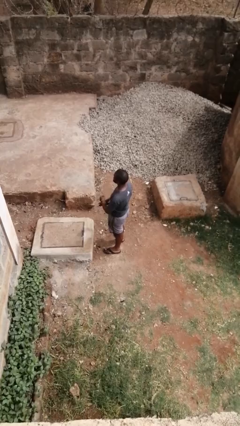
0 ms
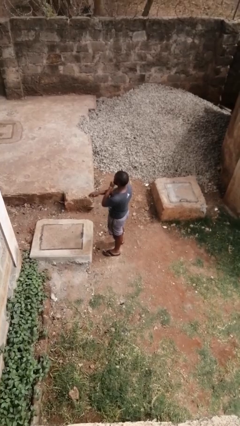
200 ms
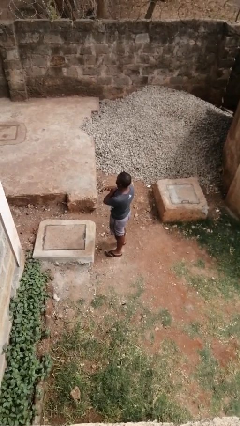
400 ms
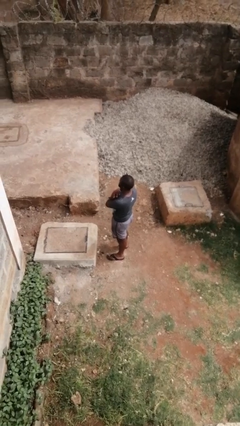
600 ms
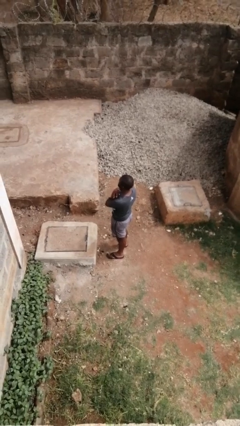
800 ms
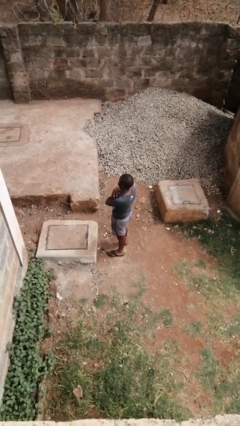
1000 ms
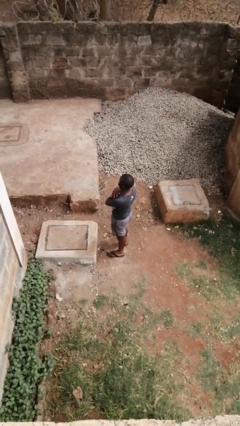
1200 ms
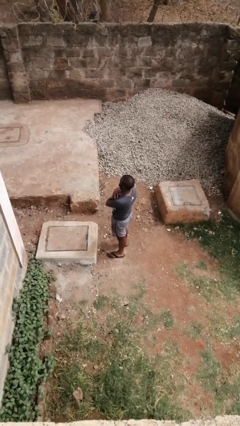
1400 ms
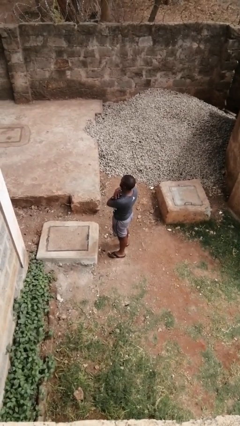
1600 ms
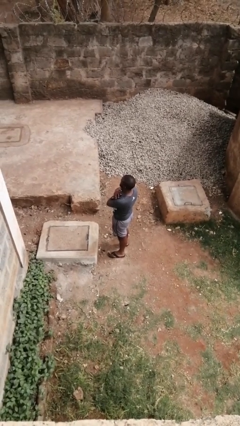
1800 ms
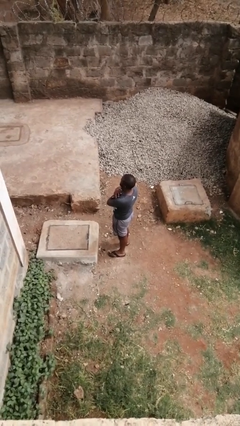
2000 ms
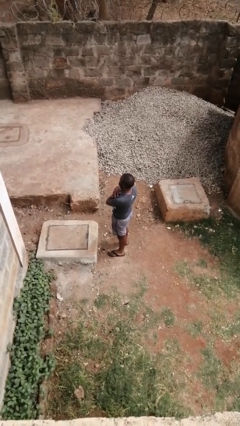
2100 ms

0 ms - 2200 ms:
person gestures arms x

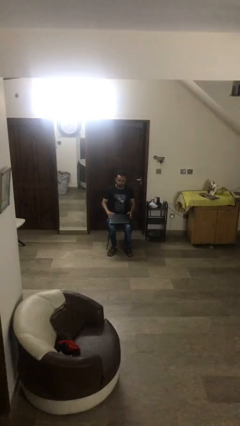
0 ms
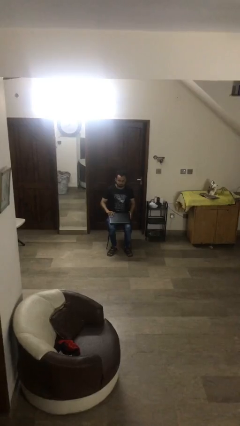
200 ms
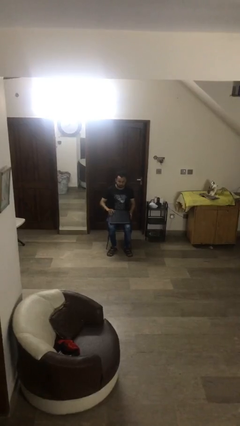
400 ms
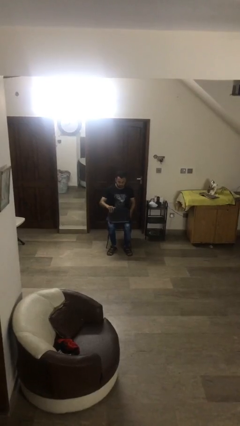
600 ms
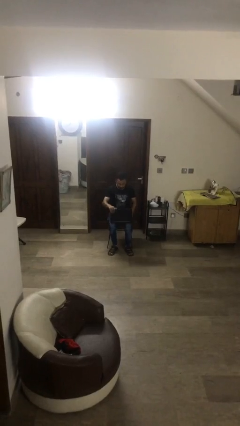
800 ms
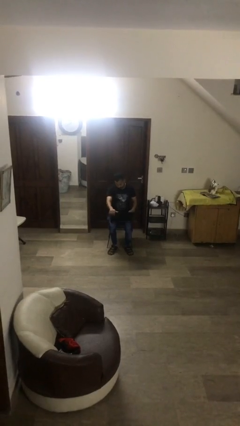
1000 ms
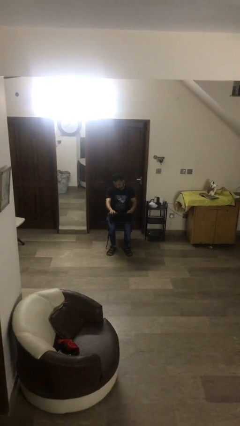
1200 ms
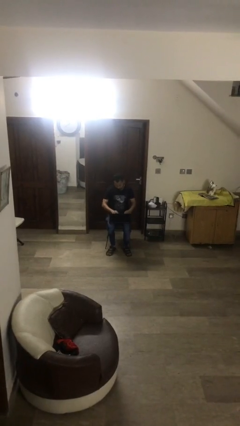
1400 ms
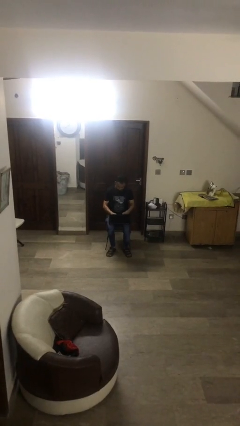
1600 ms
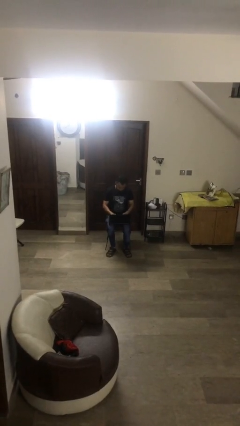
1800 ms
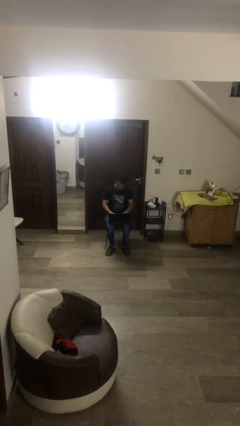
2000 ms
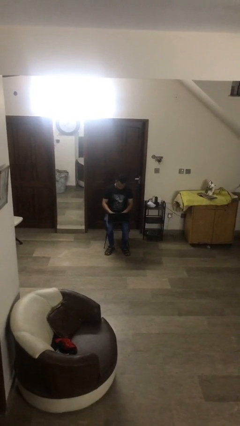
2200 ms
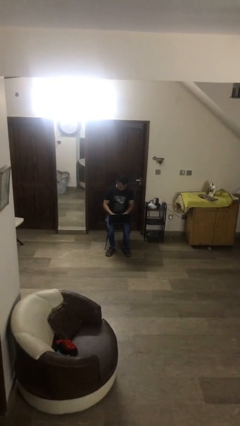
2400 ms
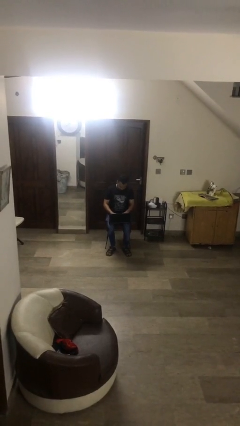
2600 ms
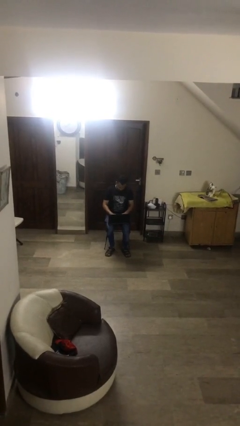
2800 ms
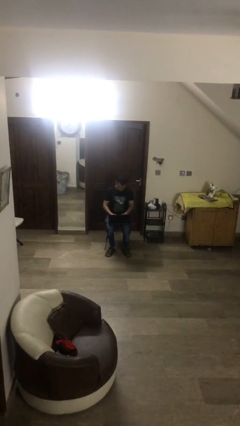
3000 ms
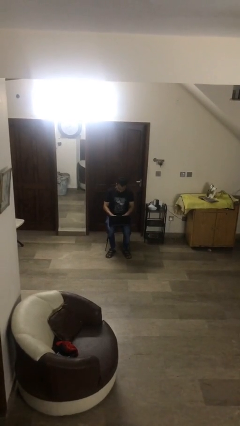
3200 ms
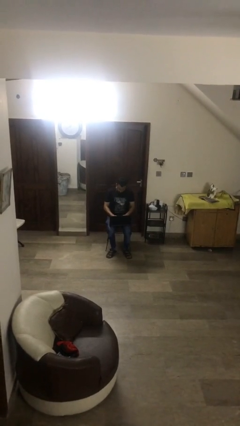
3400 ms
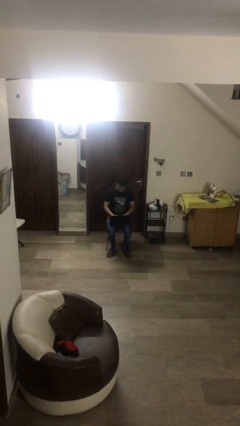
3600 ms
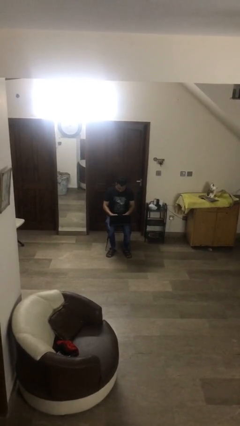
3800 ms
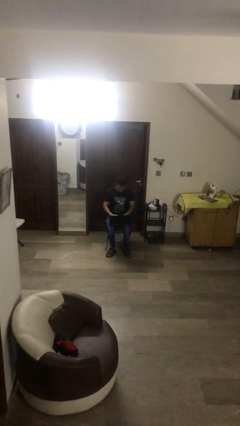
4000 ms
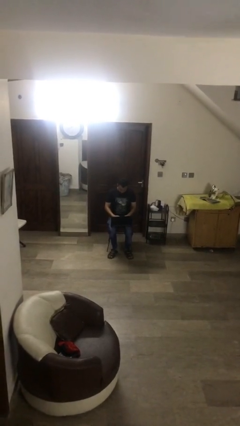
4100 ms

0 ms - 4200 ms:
person interacts with laptop

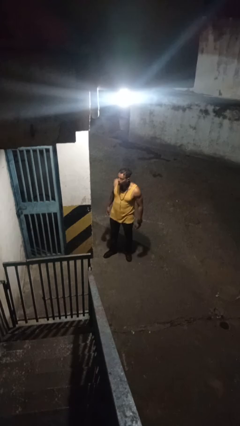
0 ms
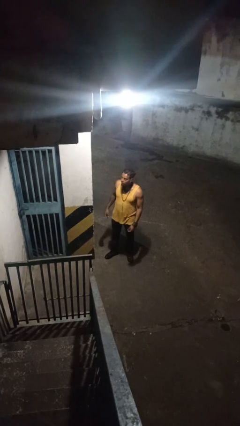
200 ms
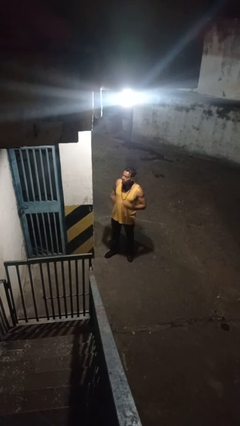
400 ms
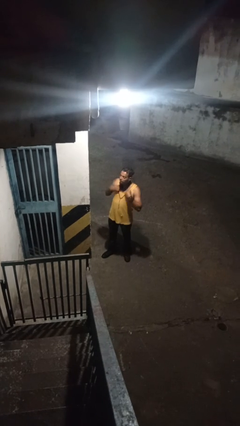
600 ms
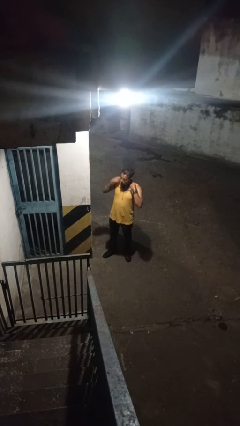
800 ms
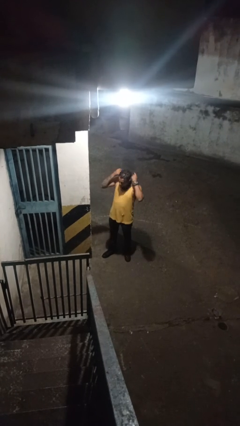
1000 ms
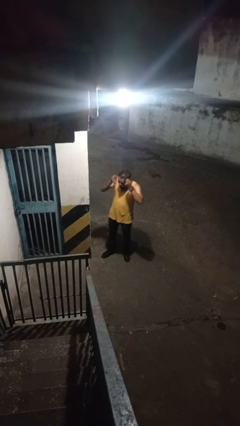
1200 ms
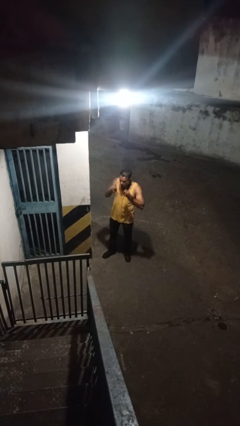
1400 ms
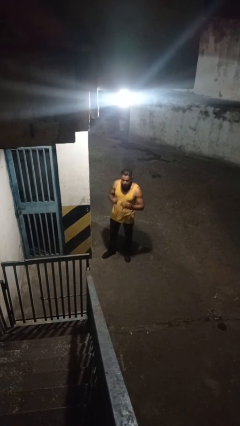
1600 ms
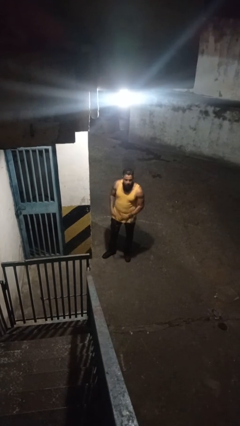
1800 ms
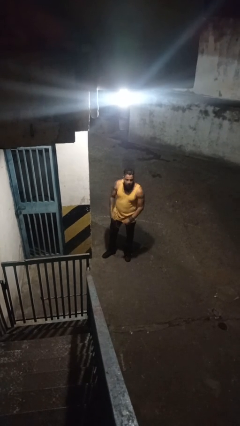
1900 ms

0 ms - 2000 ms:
person takes off necklace

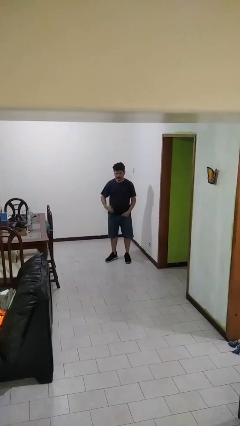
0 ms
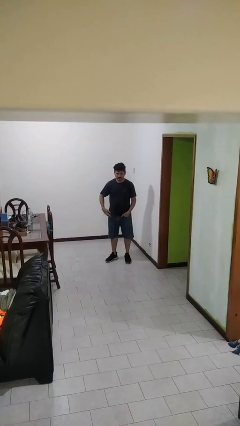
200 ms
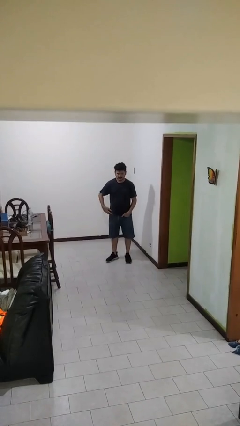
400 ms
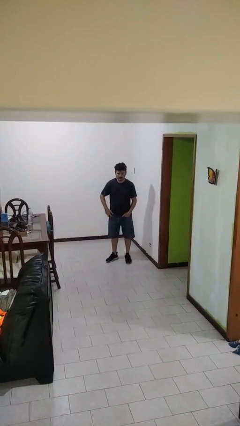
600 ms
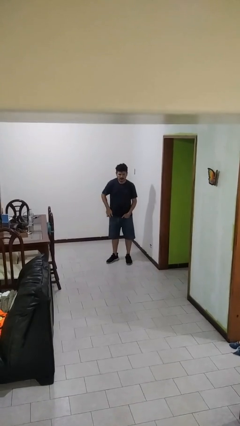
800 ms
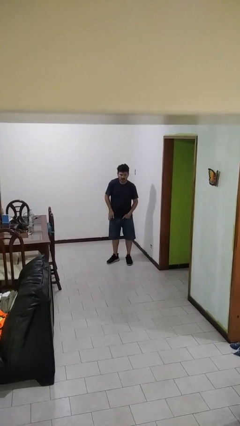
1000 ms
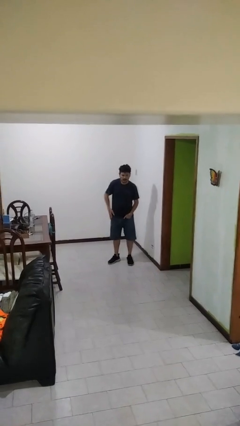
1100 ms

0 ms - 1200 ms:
person puts phone into pocket

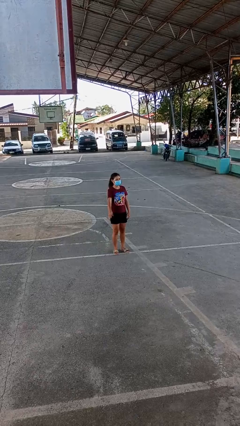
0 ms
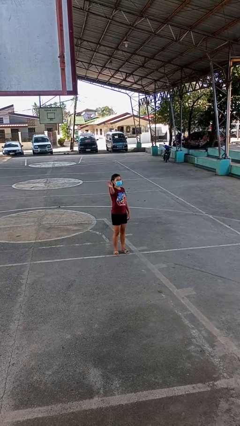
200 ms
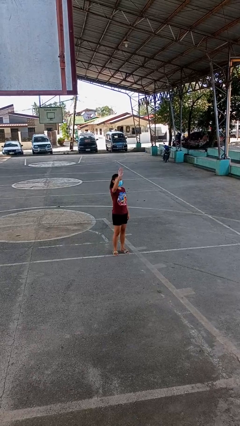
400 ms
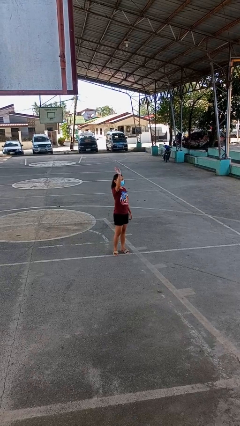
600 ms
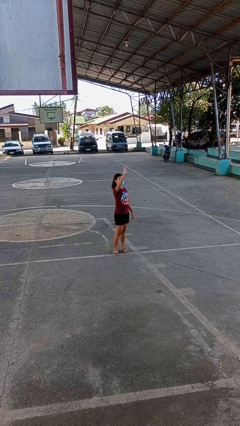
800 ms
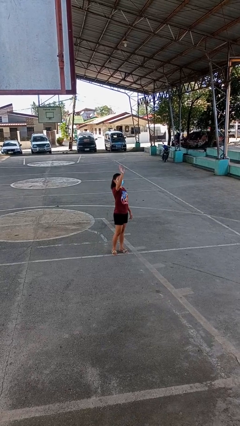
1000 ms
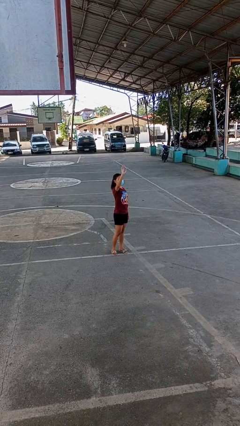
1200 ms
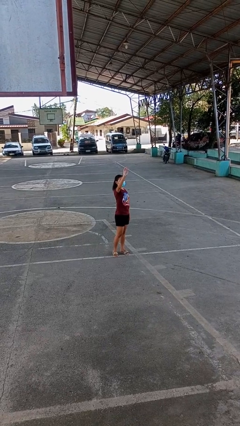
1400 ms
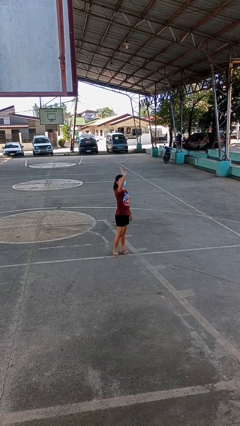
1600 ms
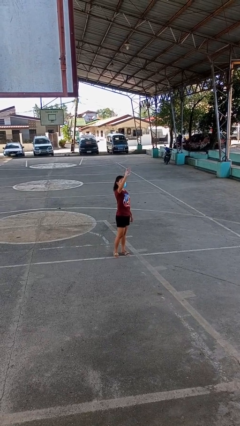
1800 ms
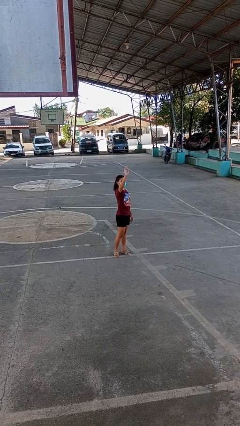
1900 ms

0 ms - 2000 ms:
person waves at person

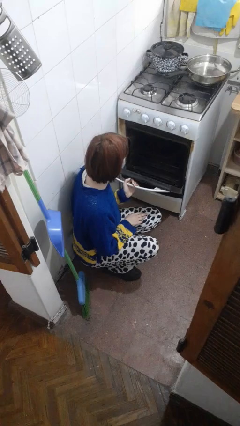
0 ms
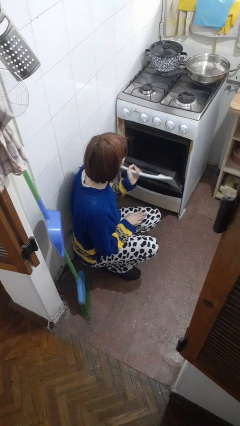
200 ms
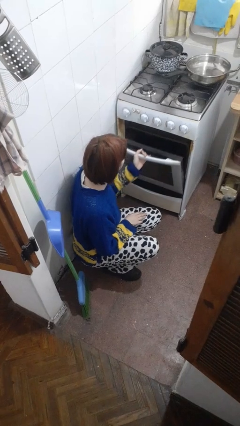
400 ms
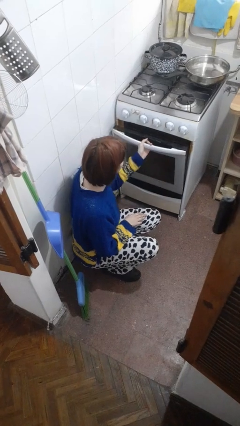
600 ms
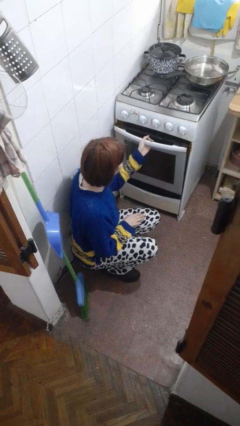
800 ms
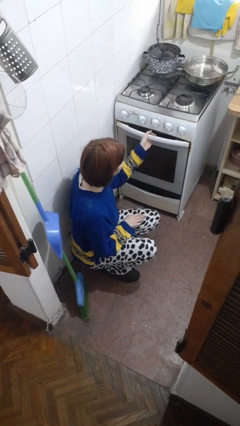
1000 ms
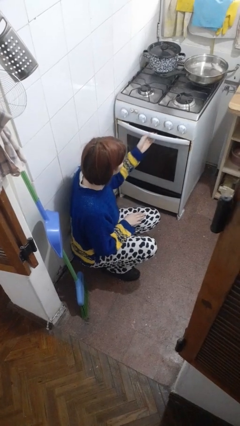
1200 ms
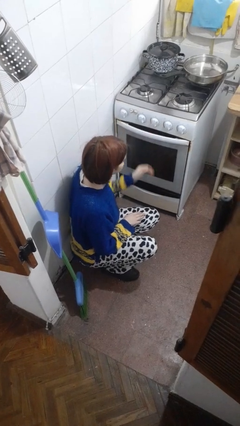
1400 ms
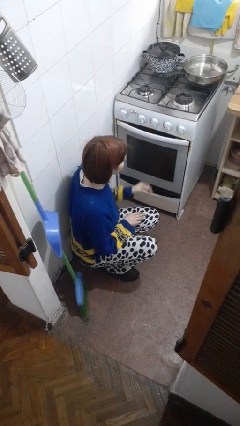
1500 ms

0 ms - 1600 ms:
person closes oven door

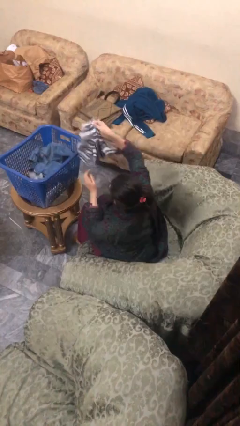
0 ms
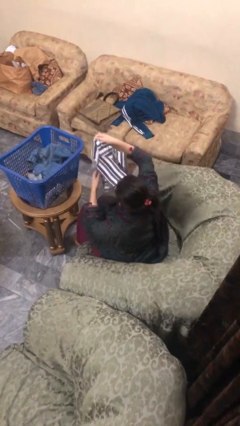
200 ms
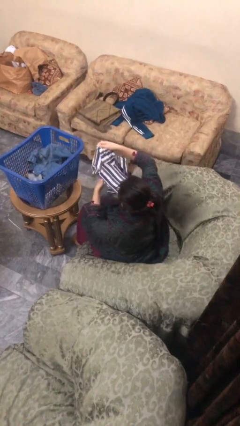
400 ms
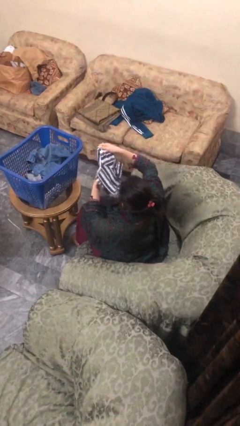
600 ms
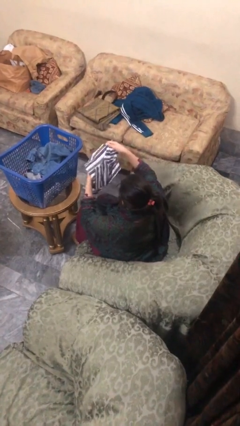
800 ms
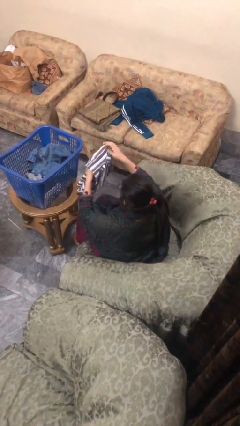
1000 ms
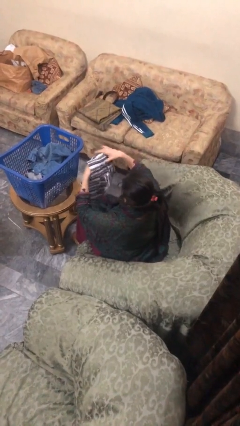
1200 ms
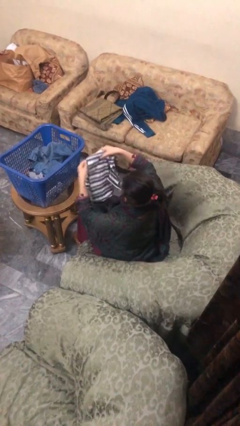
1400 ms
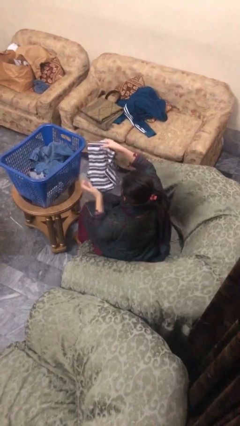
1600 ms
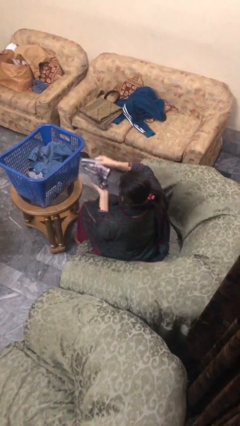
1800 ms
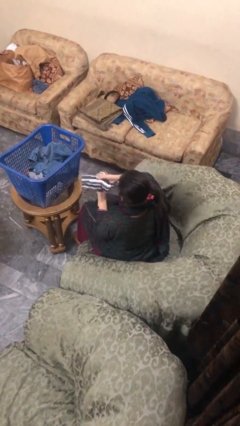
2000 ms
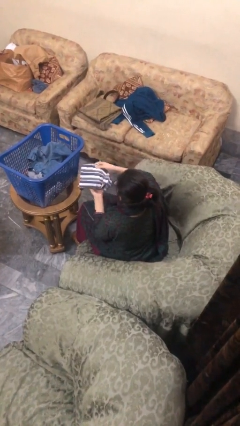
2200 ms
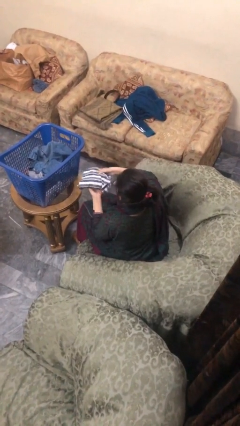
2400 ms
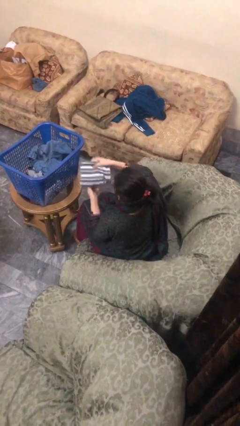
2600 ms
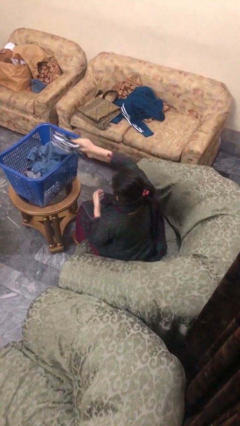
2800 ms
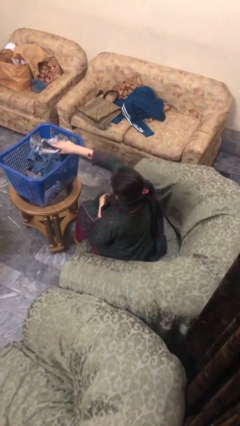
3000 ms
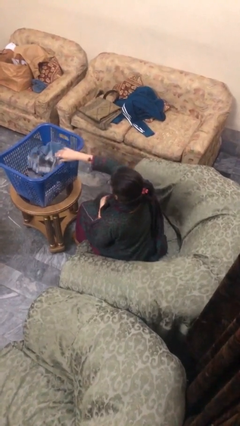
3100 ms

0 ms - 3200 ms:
person folds shirt

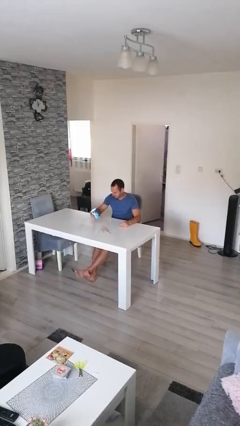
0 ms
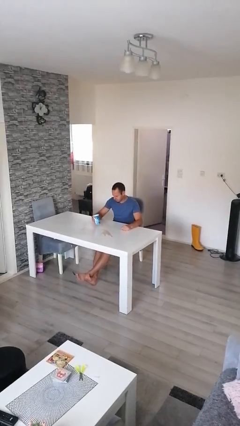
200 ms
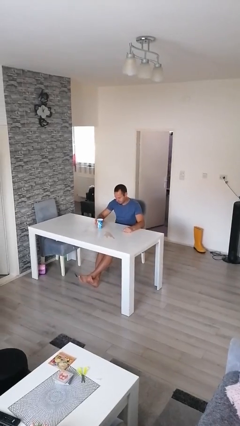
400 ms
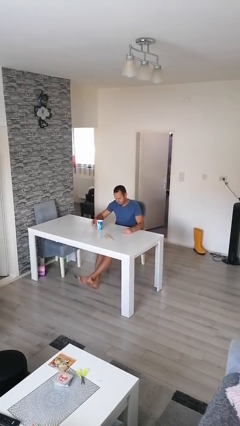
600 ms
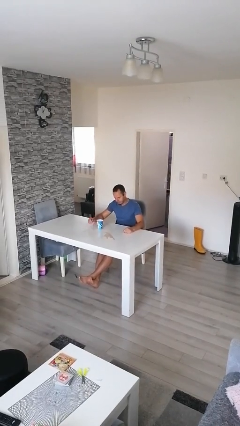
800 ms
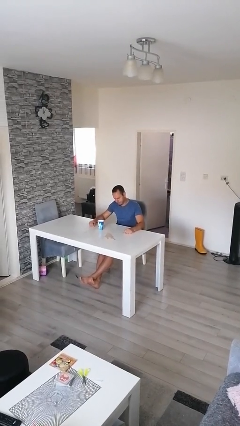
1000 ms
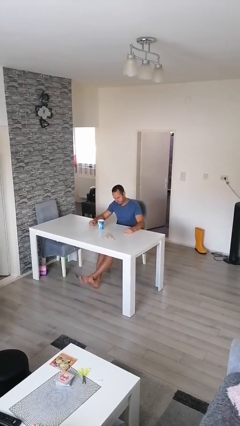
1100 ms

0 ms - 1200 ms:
person sets upright glass
